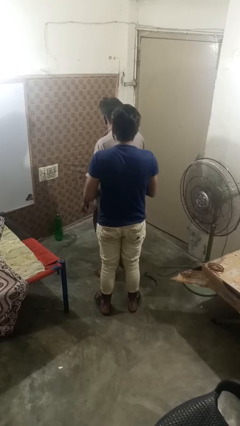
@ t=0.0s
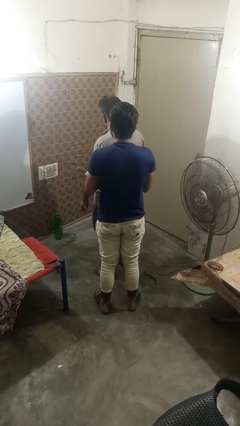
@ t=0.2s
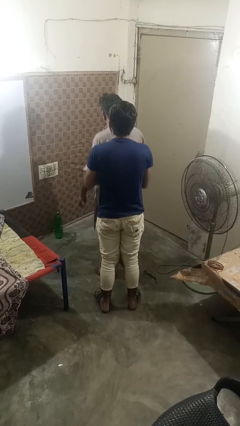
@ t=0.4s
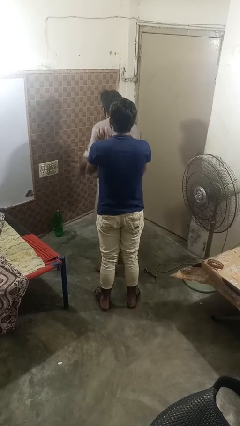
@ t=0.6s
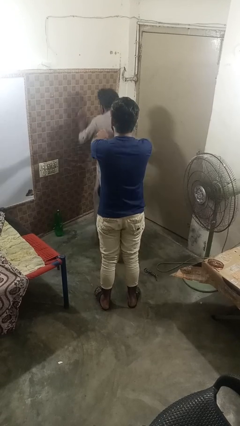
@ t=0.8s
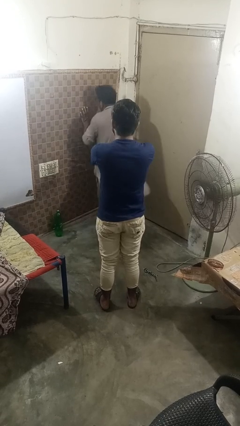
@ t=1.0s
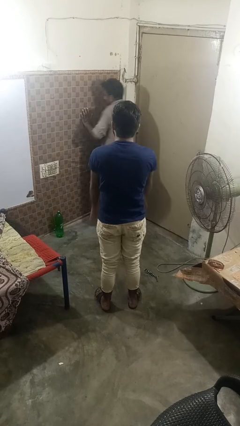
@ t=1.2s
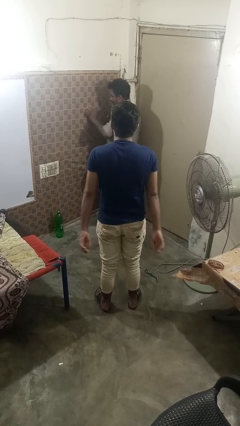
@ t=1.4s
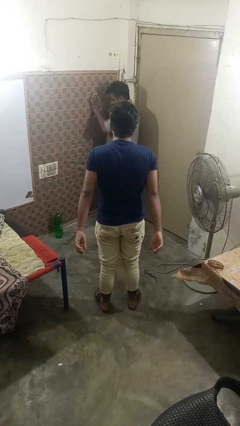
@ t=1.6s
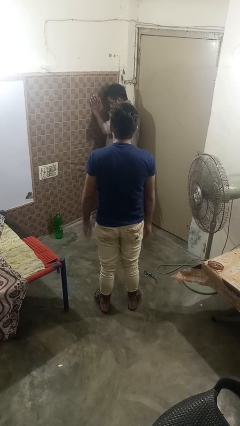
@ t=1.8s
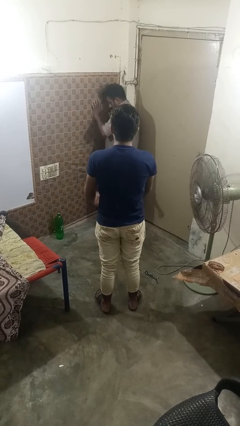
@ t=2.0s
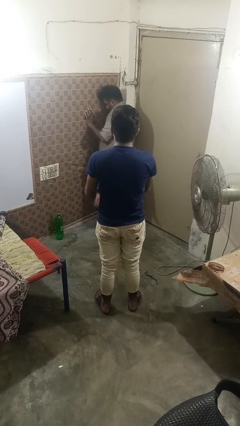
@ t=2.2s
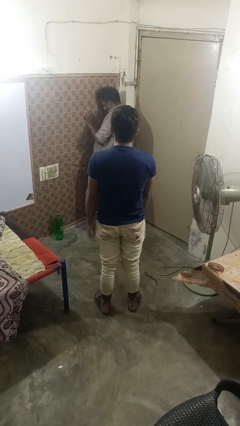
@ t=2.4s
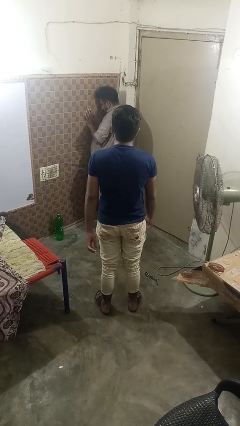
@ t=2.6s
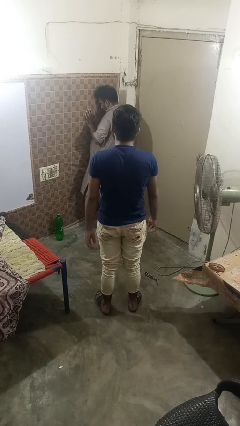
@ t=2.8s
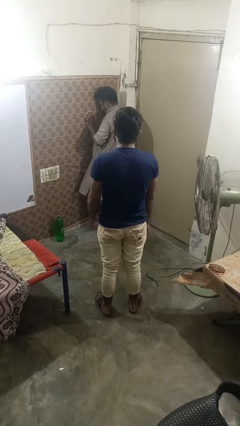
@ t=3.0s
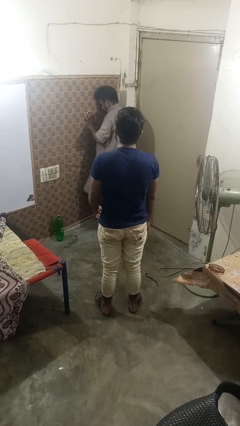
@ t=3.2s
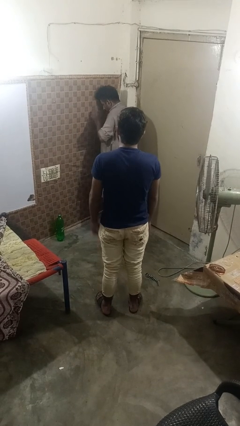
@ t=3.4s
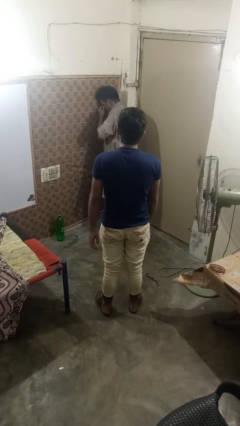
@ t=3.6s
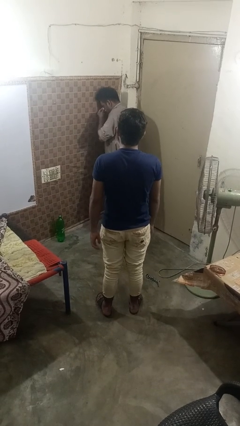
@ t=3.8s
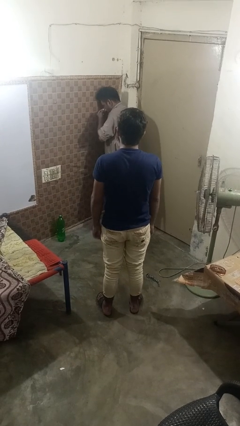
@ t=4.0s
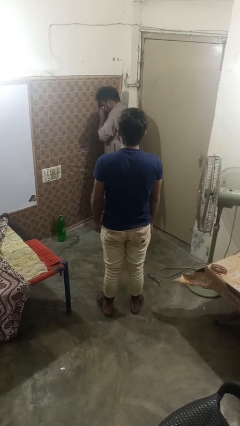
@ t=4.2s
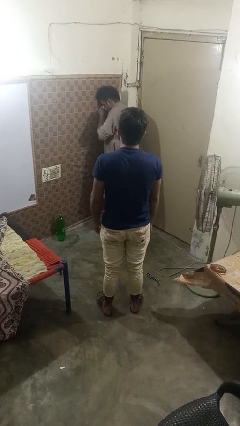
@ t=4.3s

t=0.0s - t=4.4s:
person shoves person

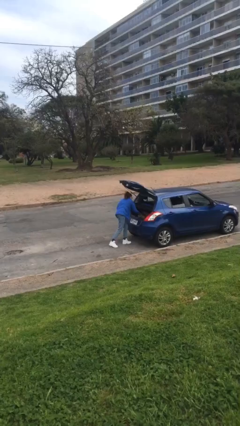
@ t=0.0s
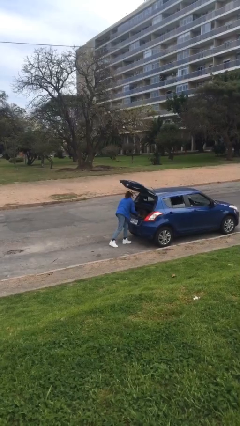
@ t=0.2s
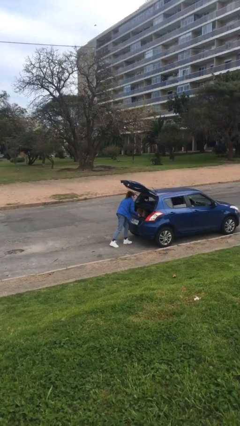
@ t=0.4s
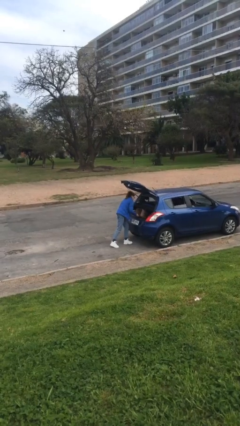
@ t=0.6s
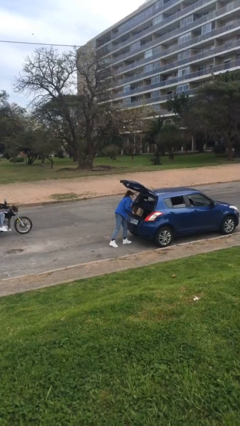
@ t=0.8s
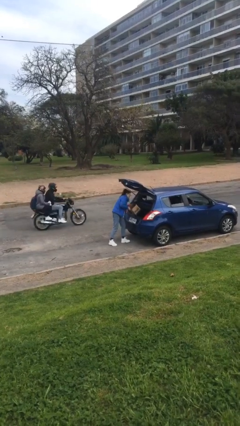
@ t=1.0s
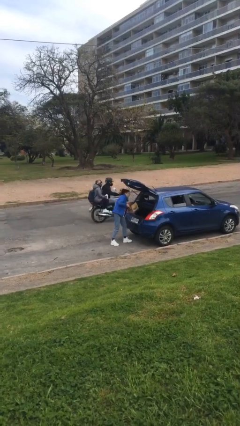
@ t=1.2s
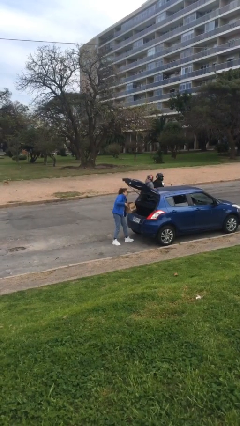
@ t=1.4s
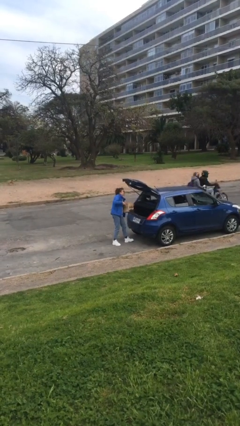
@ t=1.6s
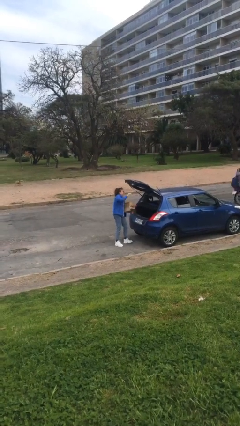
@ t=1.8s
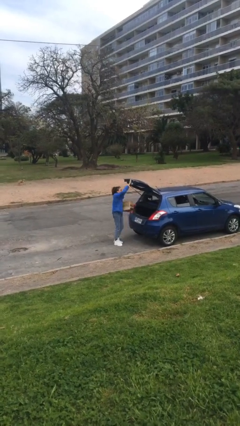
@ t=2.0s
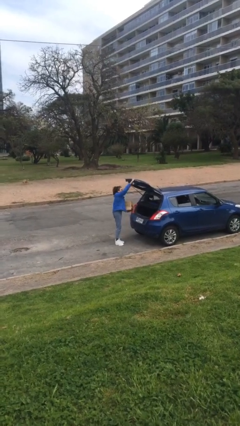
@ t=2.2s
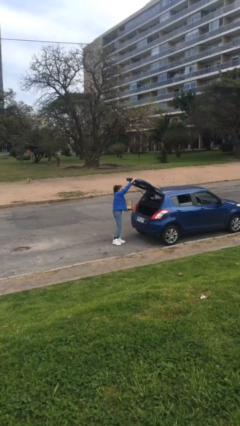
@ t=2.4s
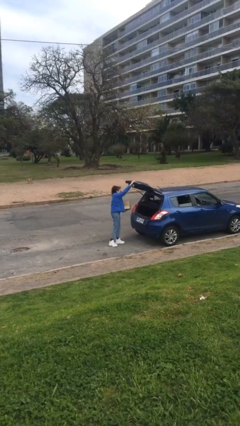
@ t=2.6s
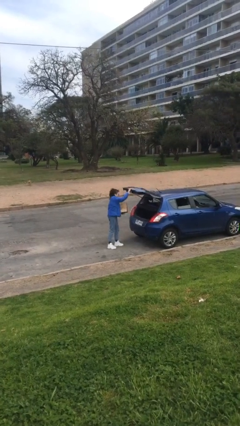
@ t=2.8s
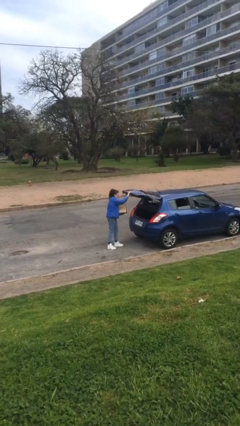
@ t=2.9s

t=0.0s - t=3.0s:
person unloads car

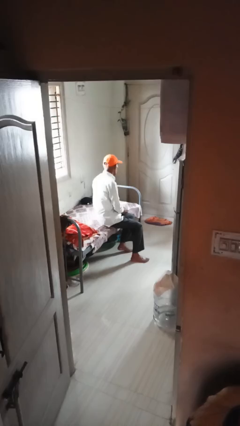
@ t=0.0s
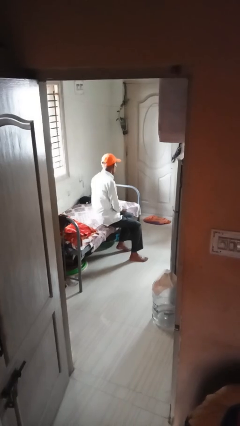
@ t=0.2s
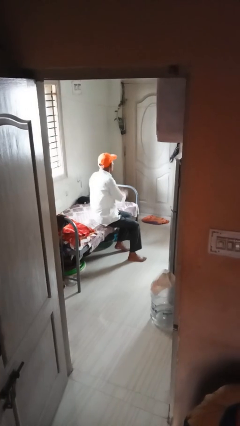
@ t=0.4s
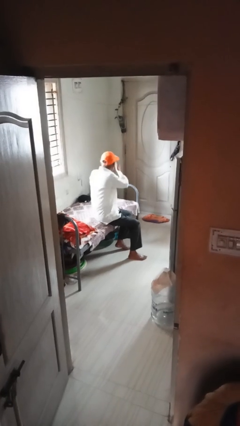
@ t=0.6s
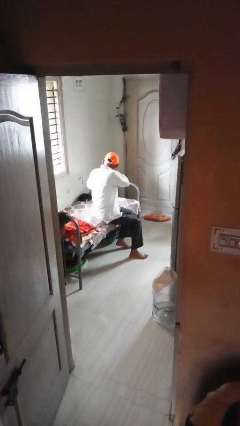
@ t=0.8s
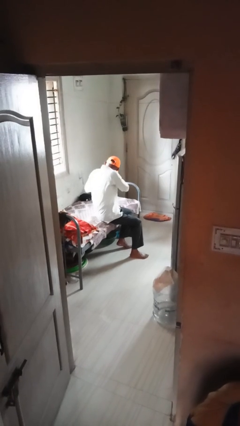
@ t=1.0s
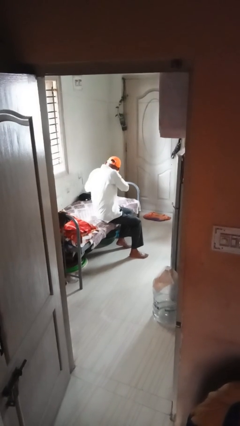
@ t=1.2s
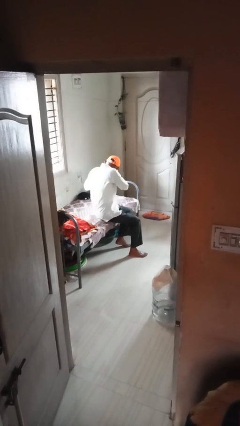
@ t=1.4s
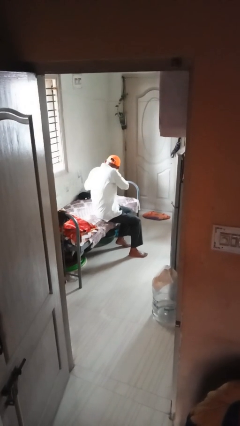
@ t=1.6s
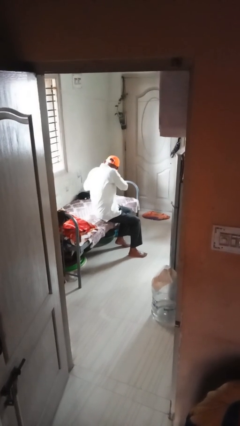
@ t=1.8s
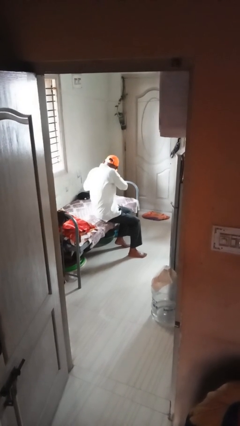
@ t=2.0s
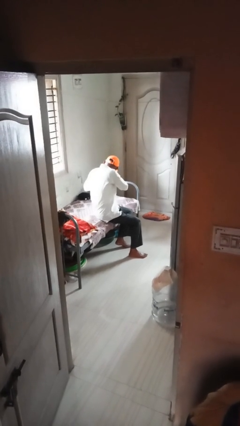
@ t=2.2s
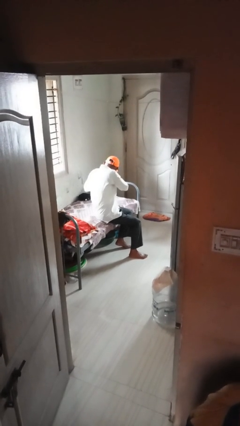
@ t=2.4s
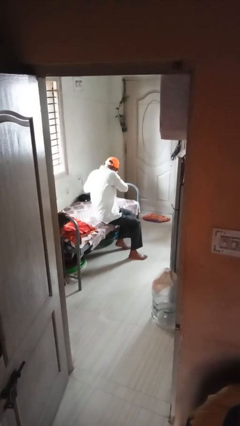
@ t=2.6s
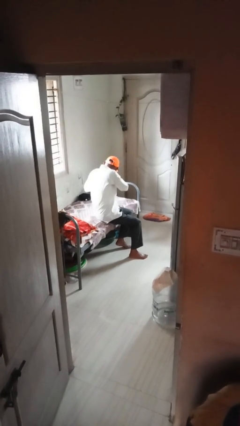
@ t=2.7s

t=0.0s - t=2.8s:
person sneezes into hand

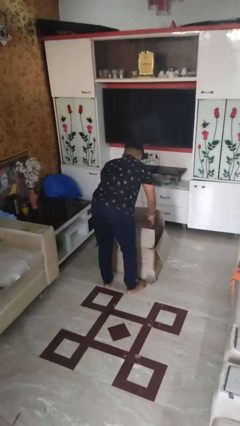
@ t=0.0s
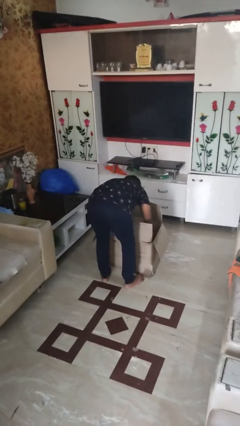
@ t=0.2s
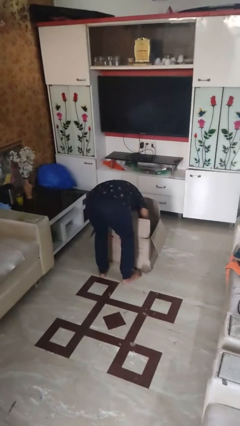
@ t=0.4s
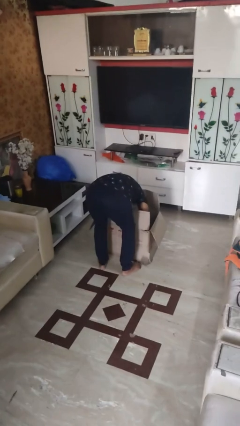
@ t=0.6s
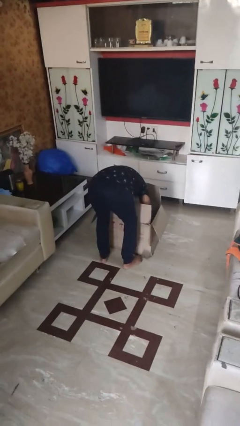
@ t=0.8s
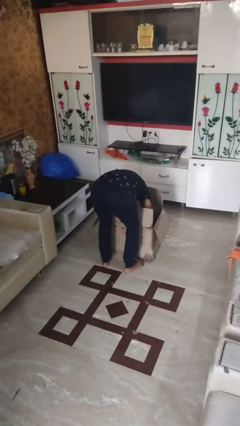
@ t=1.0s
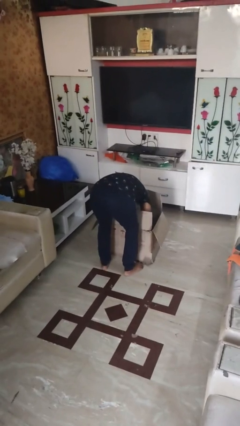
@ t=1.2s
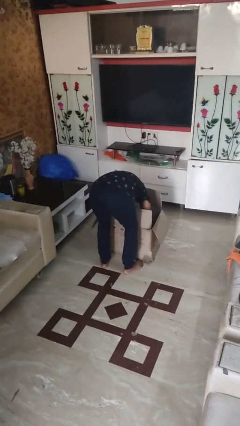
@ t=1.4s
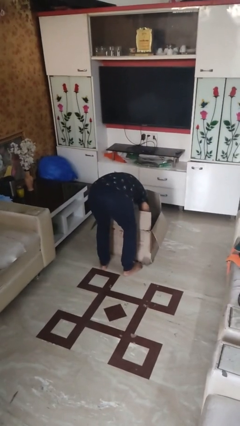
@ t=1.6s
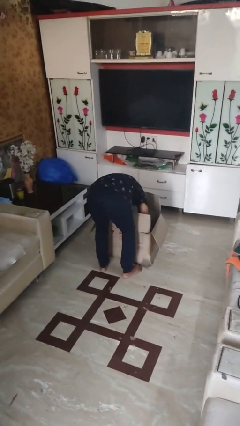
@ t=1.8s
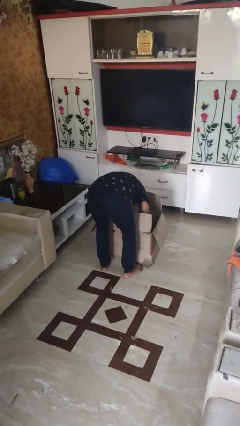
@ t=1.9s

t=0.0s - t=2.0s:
person searches in box

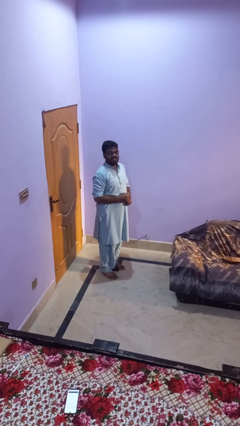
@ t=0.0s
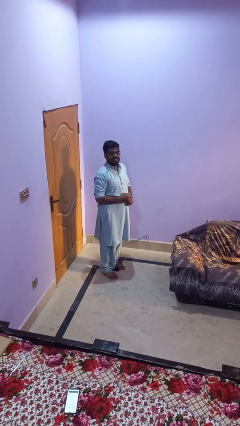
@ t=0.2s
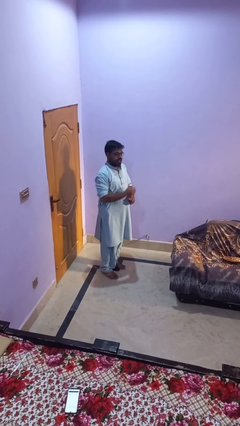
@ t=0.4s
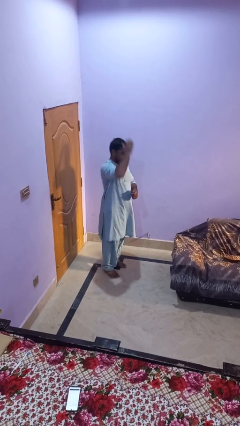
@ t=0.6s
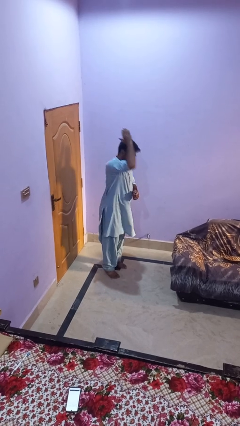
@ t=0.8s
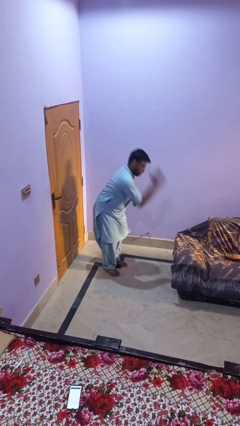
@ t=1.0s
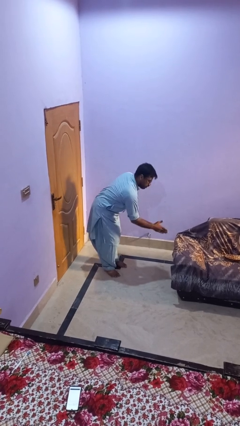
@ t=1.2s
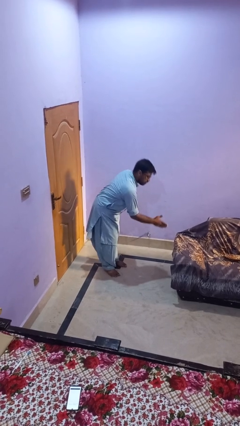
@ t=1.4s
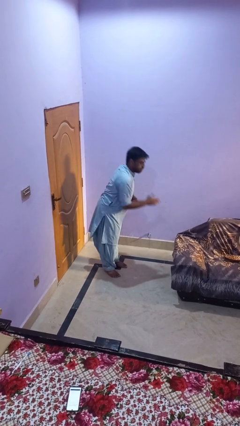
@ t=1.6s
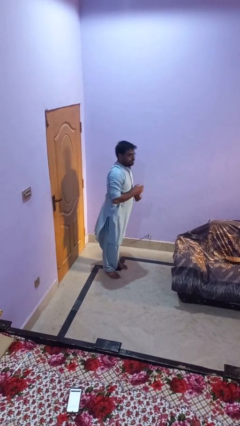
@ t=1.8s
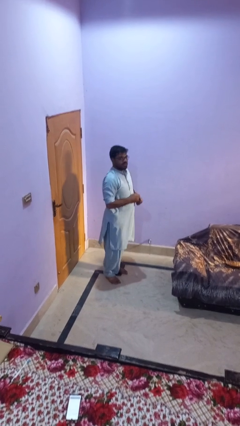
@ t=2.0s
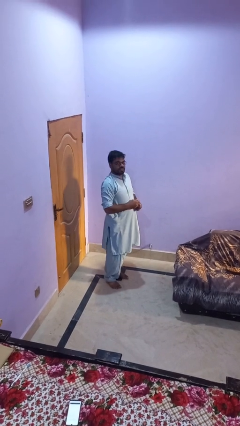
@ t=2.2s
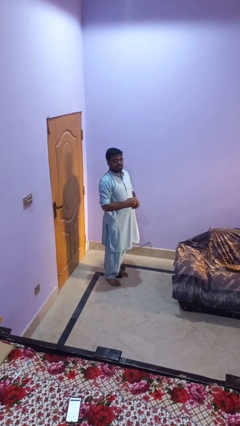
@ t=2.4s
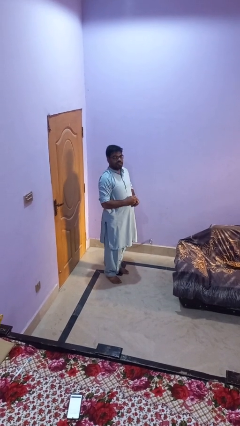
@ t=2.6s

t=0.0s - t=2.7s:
person karate chop

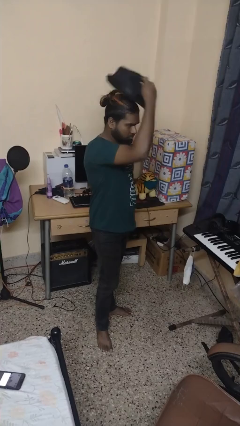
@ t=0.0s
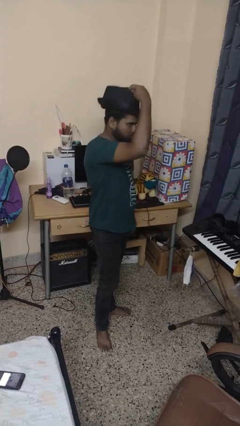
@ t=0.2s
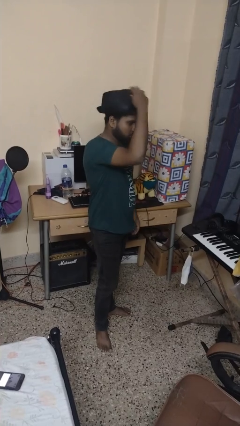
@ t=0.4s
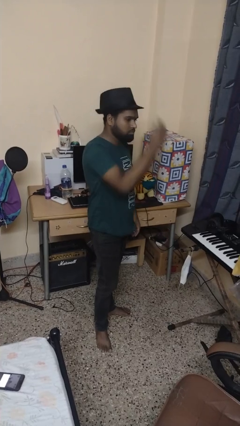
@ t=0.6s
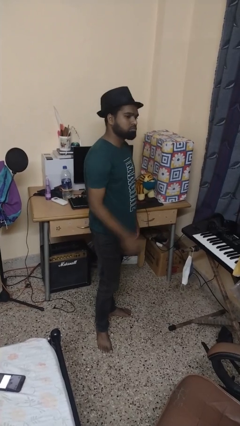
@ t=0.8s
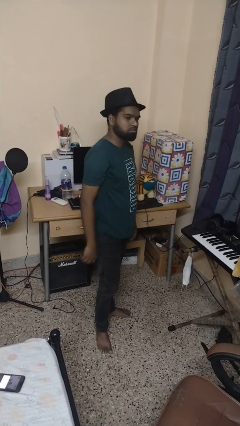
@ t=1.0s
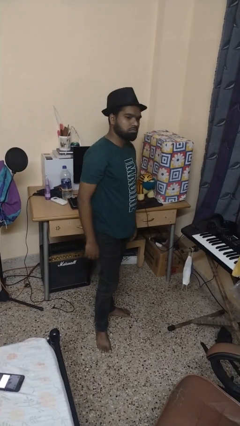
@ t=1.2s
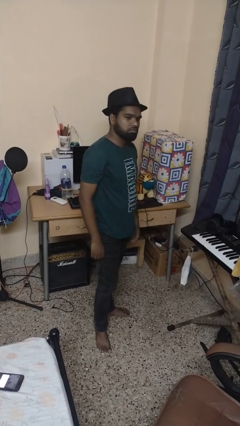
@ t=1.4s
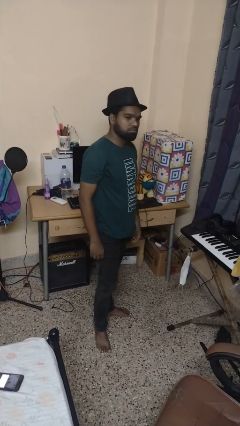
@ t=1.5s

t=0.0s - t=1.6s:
person puts on hat

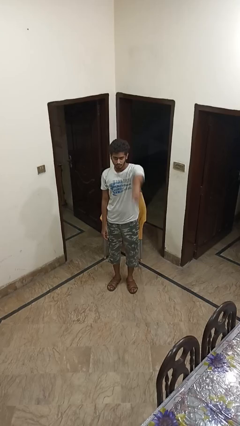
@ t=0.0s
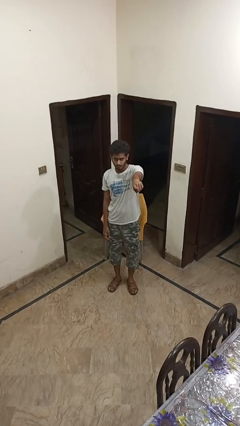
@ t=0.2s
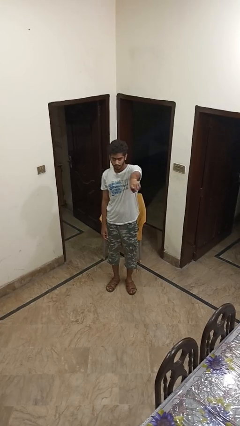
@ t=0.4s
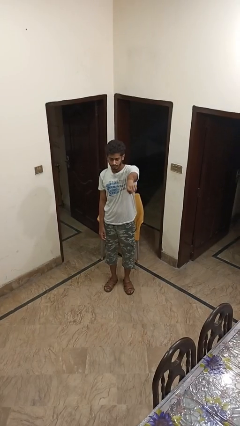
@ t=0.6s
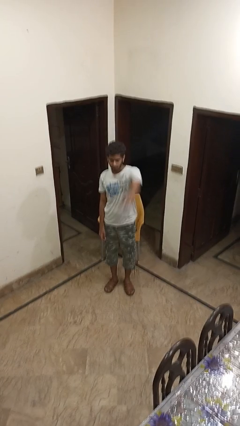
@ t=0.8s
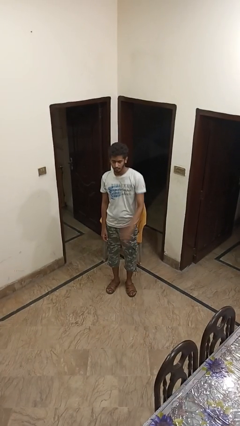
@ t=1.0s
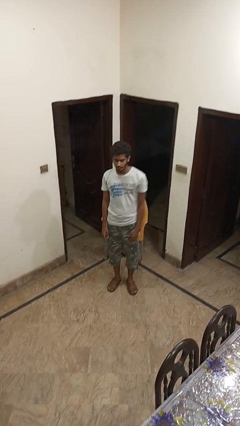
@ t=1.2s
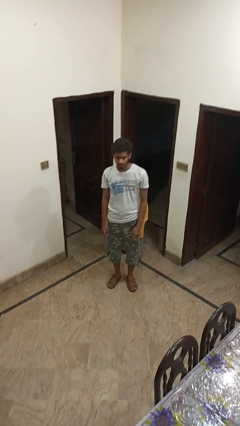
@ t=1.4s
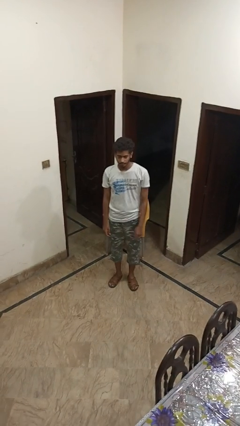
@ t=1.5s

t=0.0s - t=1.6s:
person points at person
